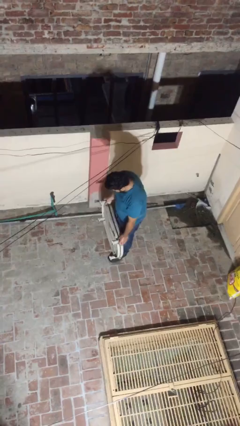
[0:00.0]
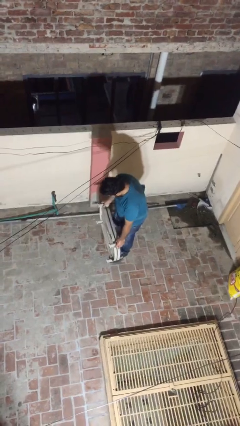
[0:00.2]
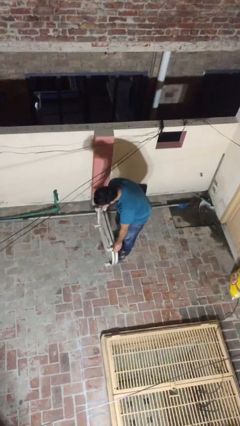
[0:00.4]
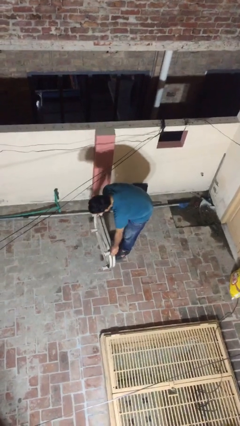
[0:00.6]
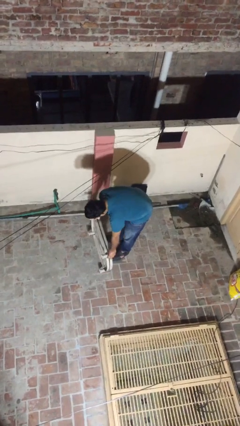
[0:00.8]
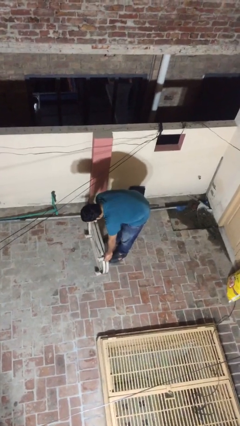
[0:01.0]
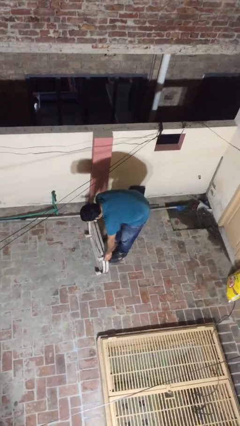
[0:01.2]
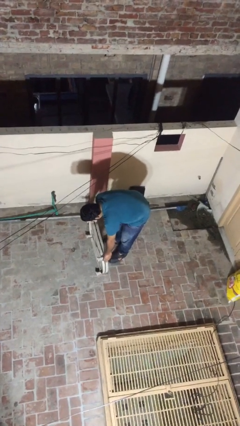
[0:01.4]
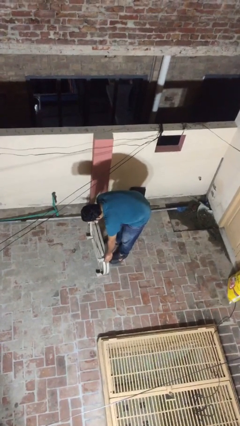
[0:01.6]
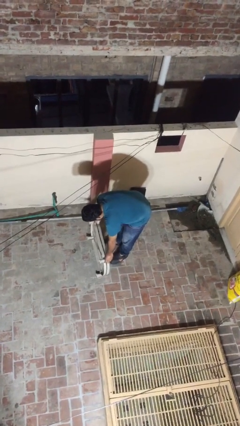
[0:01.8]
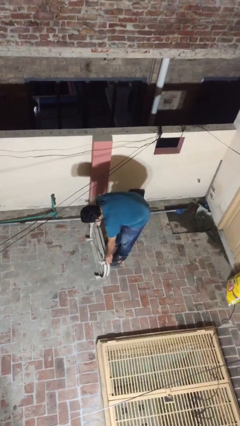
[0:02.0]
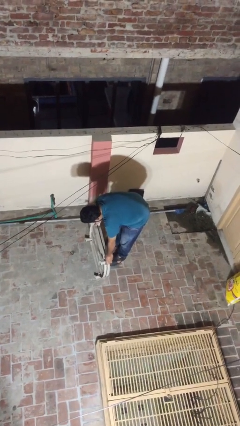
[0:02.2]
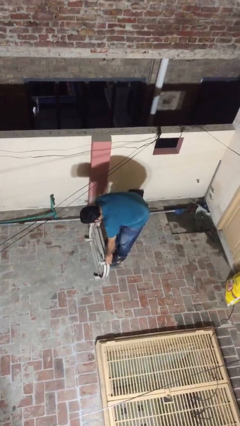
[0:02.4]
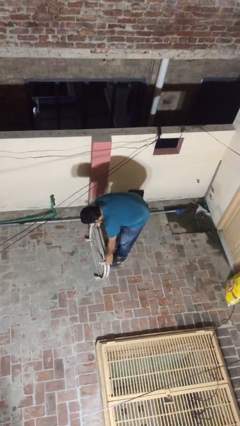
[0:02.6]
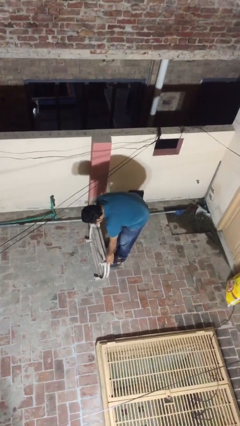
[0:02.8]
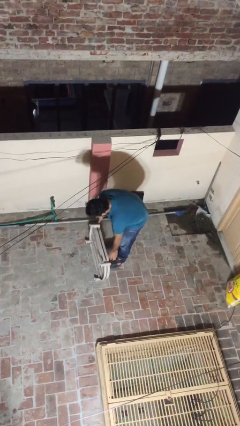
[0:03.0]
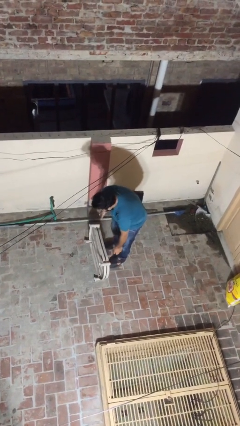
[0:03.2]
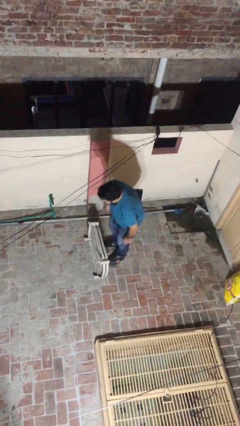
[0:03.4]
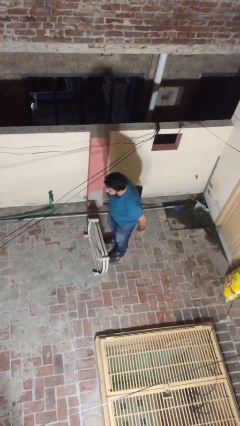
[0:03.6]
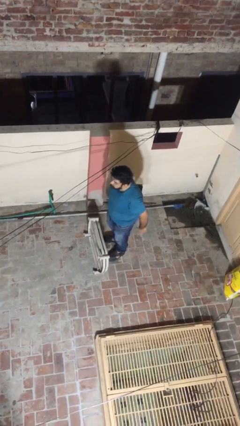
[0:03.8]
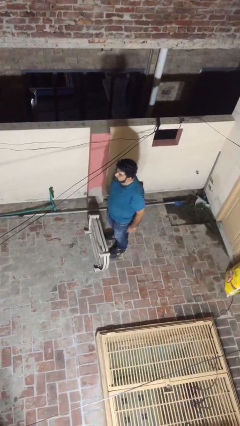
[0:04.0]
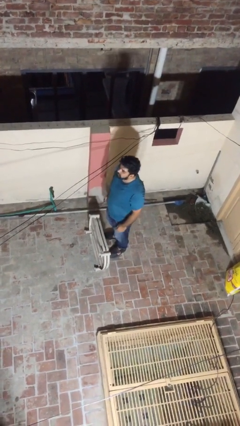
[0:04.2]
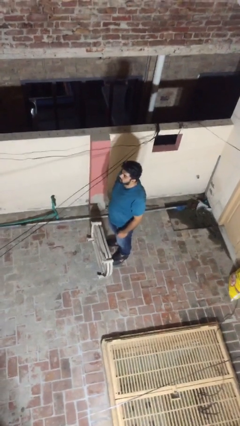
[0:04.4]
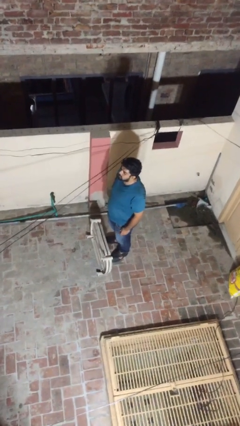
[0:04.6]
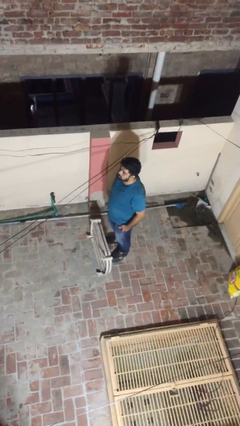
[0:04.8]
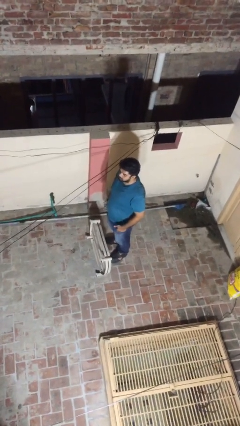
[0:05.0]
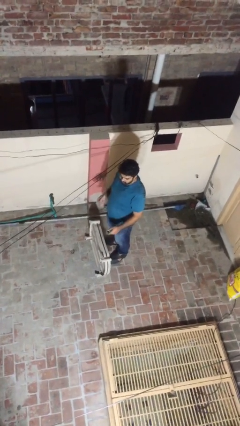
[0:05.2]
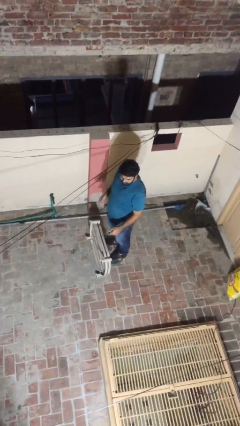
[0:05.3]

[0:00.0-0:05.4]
person puts down object on floor

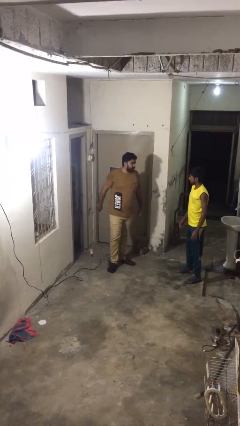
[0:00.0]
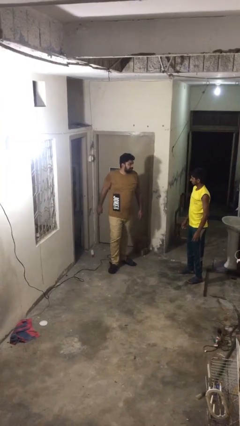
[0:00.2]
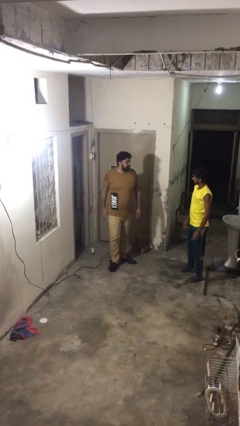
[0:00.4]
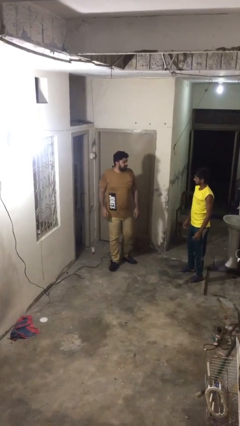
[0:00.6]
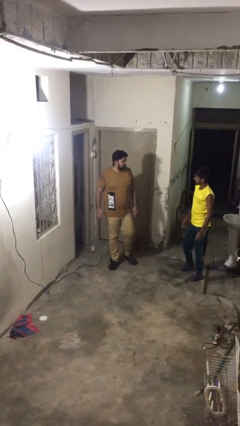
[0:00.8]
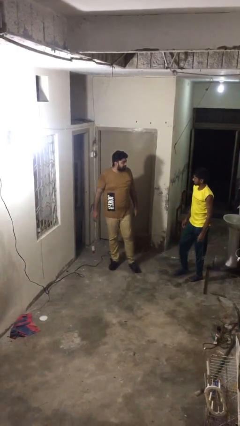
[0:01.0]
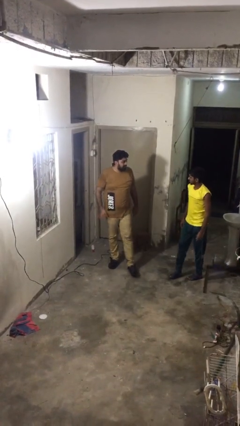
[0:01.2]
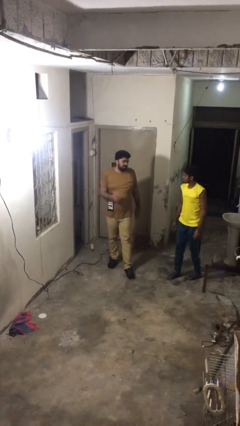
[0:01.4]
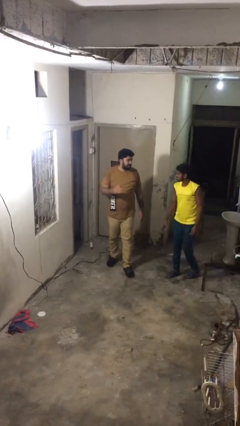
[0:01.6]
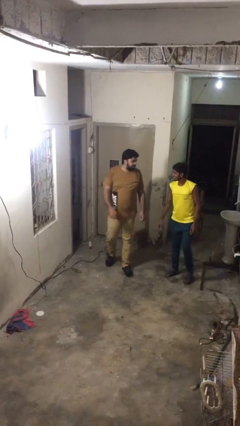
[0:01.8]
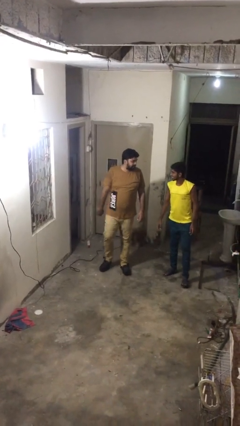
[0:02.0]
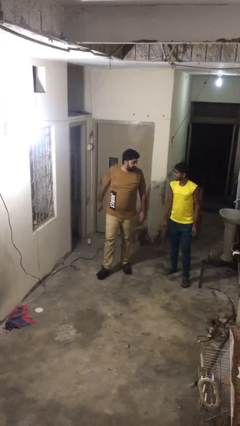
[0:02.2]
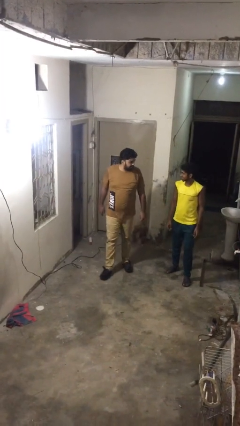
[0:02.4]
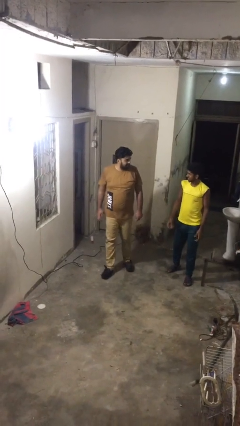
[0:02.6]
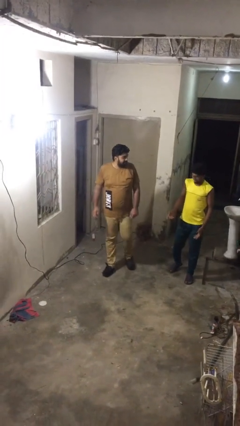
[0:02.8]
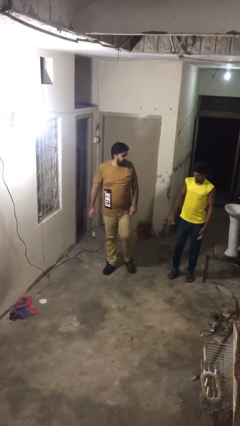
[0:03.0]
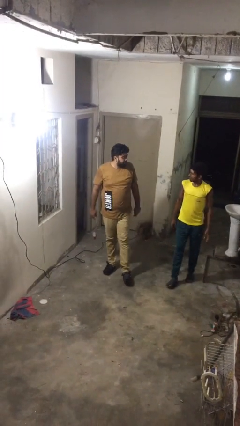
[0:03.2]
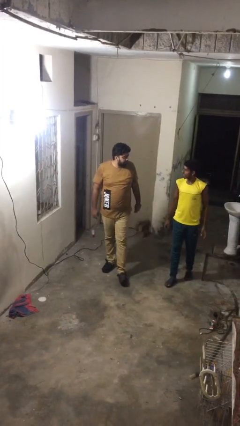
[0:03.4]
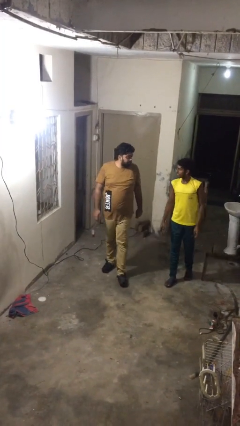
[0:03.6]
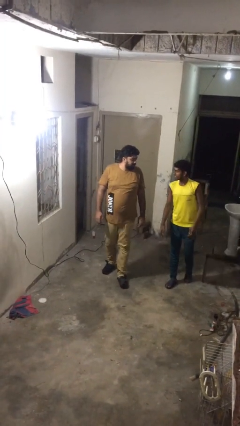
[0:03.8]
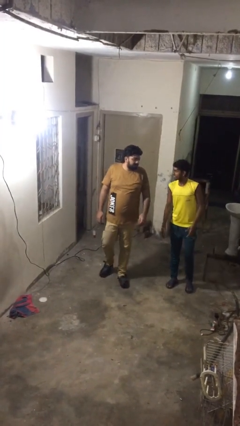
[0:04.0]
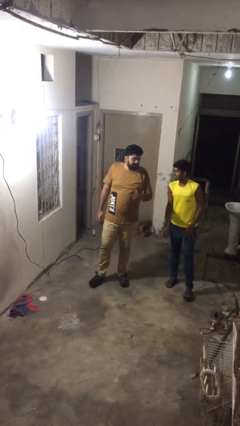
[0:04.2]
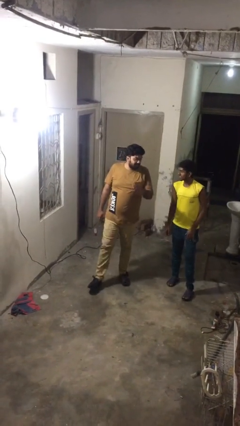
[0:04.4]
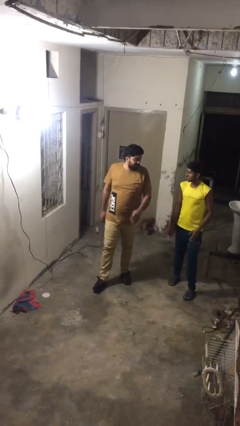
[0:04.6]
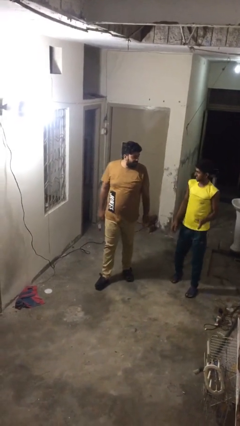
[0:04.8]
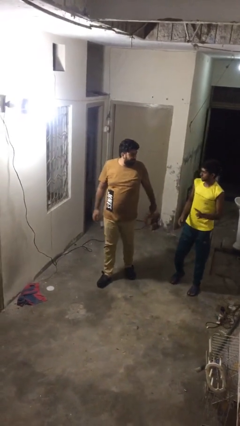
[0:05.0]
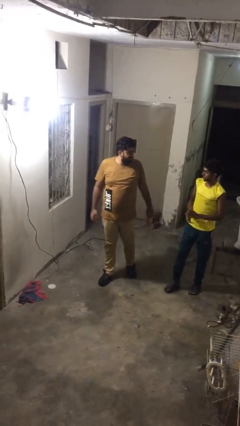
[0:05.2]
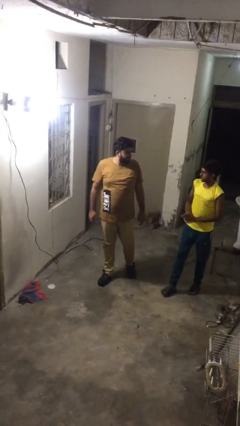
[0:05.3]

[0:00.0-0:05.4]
person talks to person

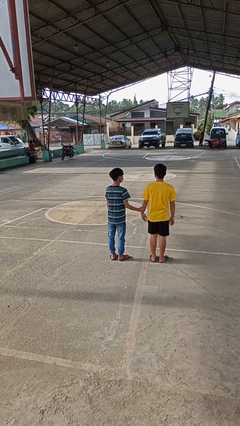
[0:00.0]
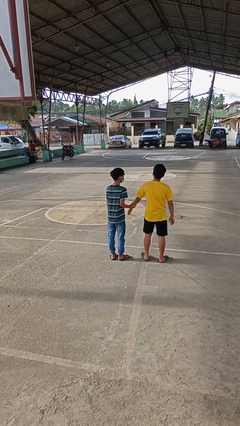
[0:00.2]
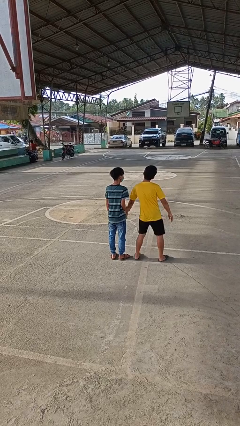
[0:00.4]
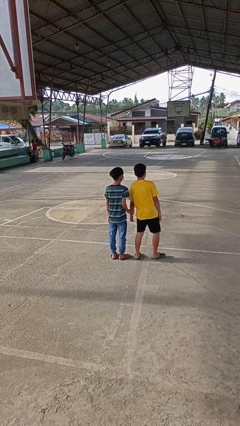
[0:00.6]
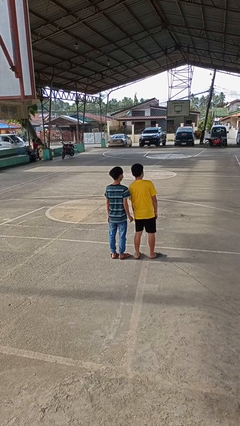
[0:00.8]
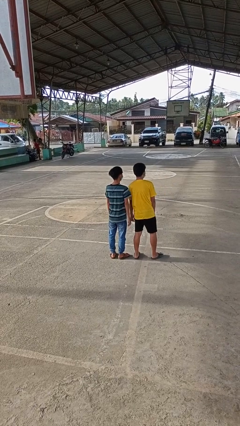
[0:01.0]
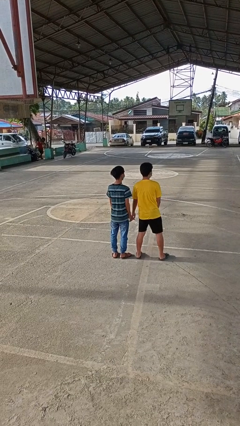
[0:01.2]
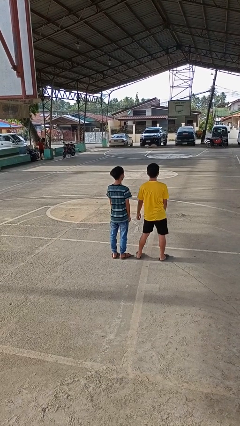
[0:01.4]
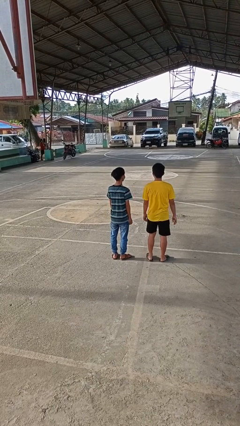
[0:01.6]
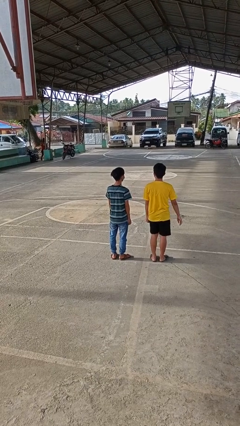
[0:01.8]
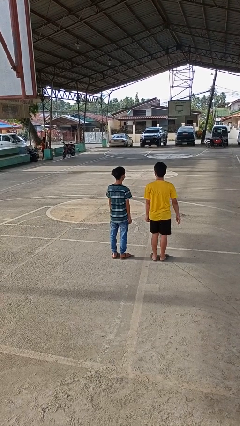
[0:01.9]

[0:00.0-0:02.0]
person grabs person by forearm

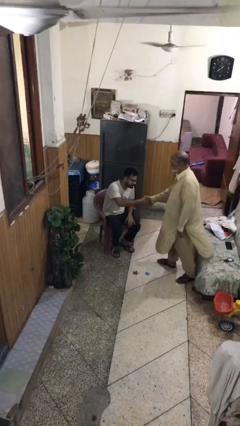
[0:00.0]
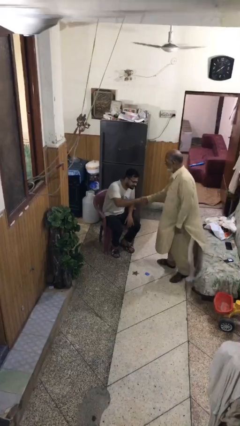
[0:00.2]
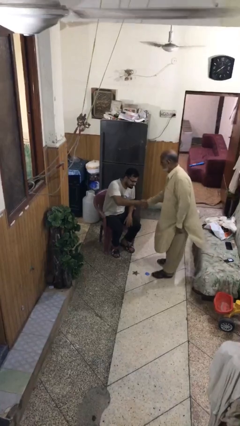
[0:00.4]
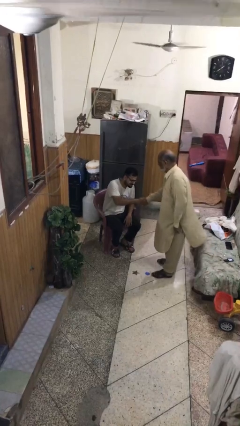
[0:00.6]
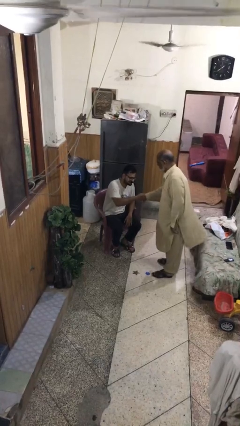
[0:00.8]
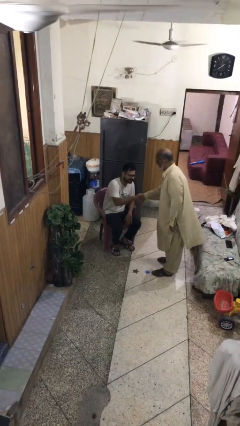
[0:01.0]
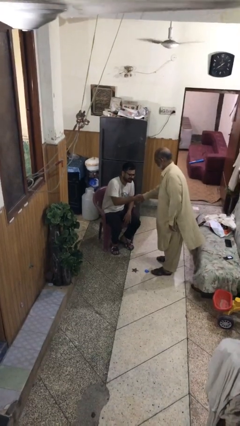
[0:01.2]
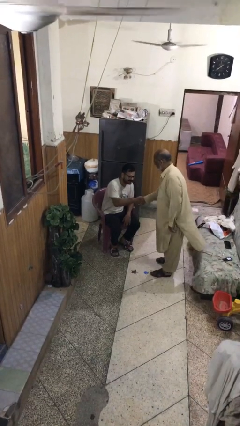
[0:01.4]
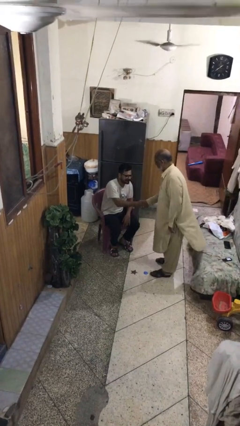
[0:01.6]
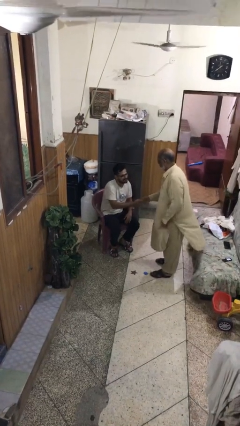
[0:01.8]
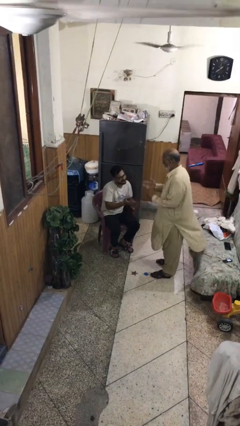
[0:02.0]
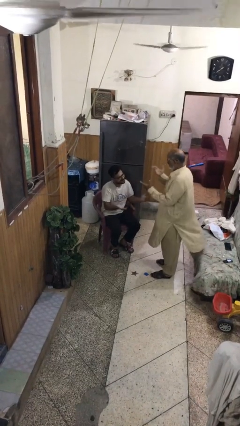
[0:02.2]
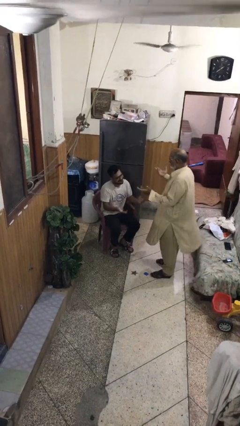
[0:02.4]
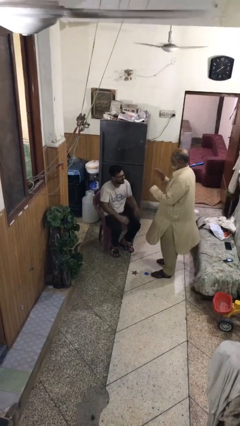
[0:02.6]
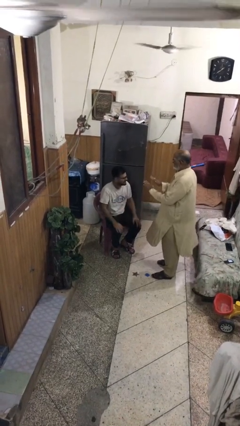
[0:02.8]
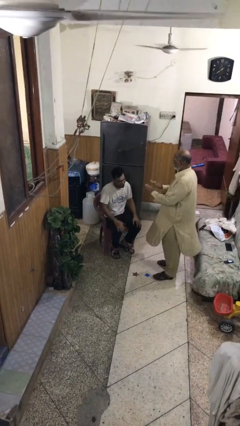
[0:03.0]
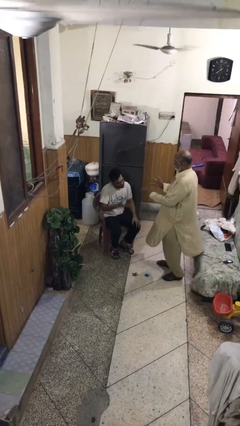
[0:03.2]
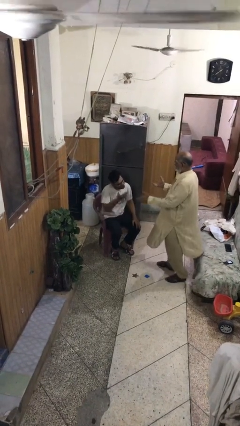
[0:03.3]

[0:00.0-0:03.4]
person shakes hand

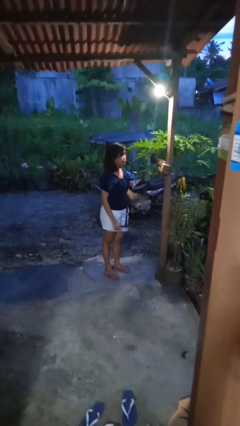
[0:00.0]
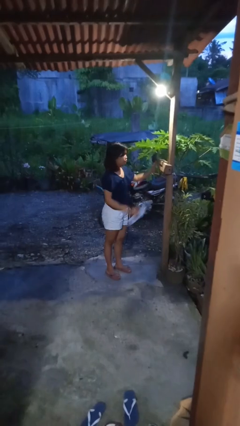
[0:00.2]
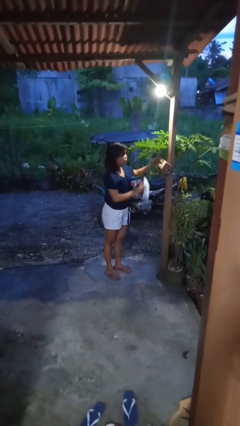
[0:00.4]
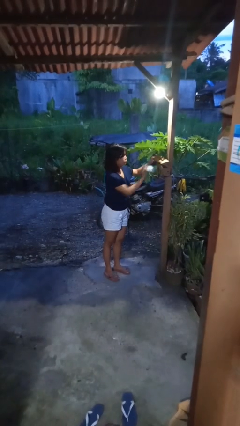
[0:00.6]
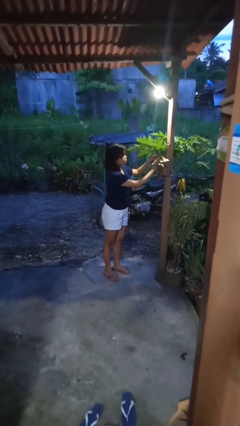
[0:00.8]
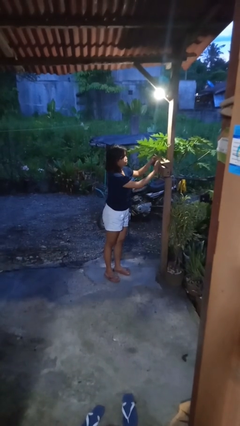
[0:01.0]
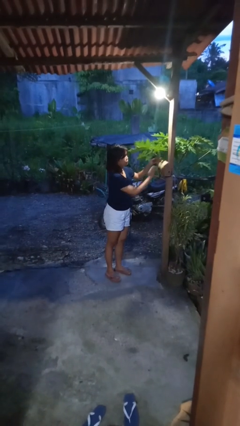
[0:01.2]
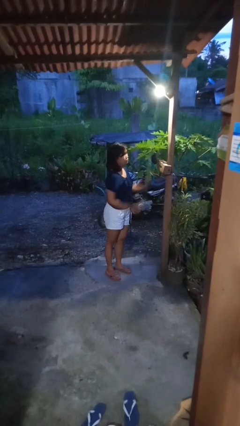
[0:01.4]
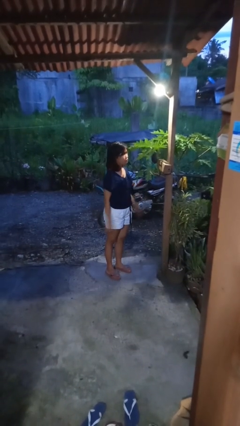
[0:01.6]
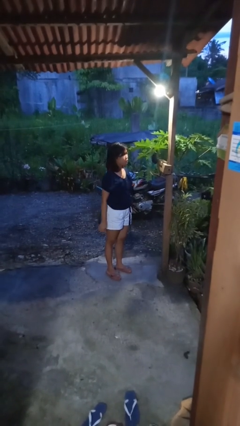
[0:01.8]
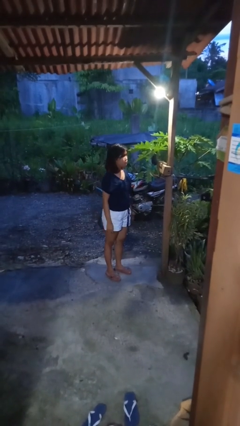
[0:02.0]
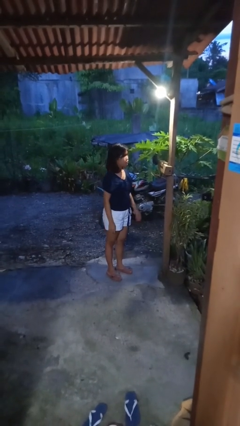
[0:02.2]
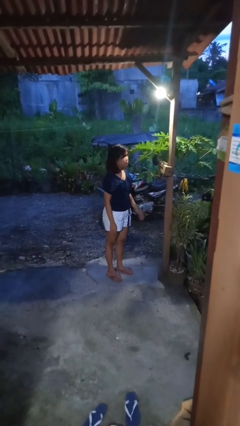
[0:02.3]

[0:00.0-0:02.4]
person puts letters in mailbox
